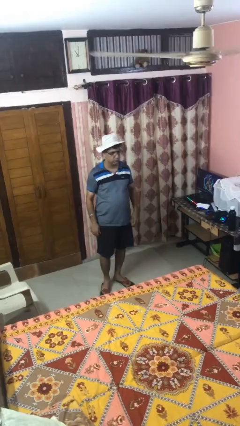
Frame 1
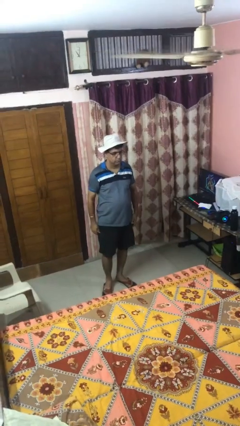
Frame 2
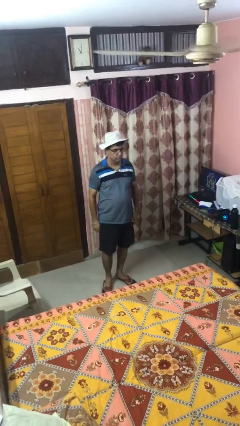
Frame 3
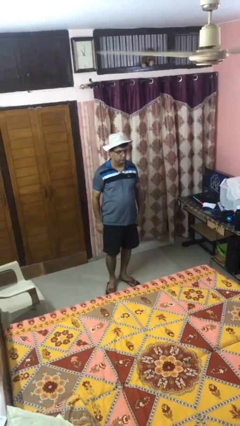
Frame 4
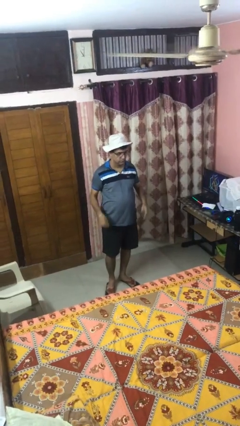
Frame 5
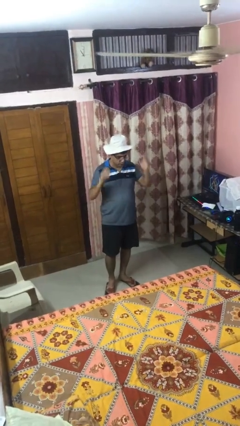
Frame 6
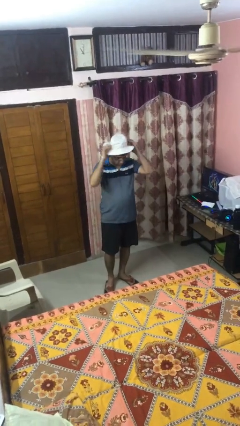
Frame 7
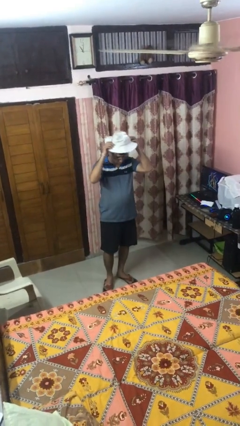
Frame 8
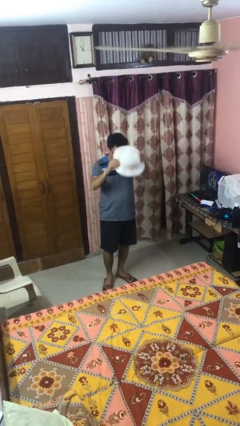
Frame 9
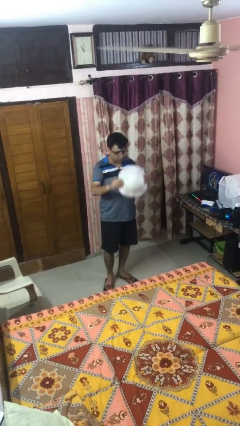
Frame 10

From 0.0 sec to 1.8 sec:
person takes off hat

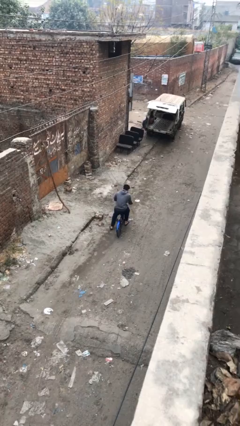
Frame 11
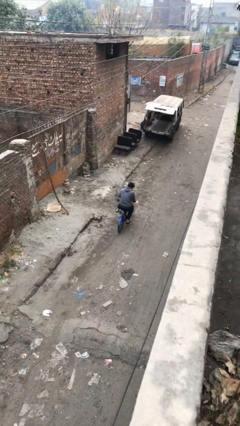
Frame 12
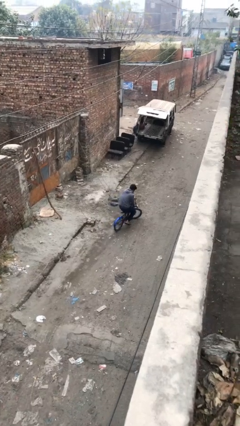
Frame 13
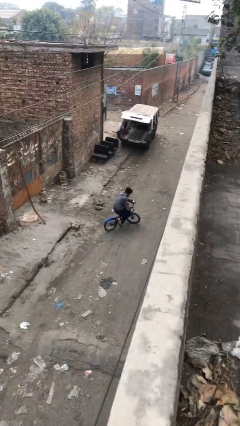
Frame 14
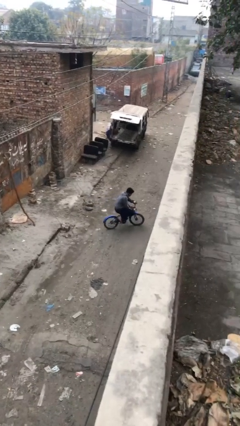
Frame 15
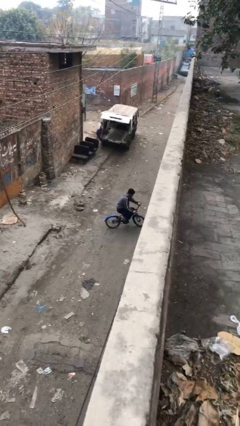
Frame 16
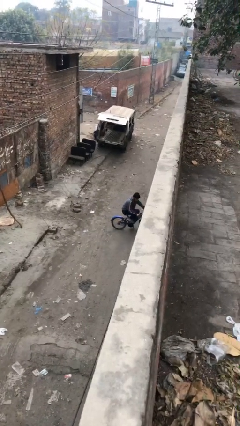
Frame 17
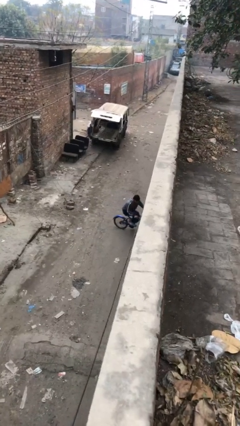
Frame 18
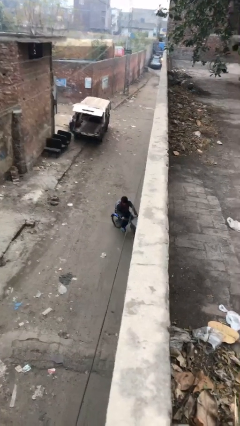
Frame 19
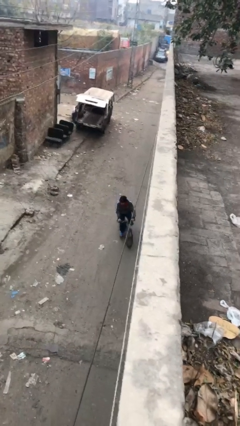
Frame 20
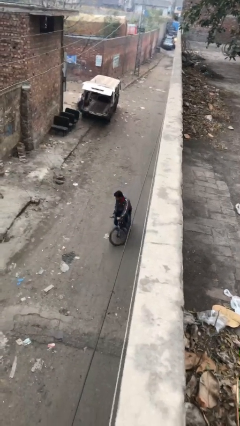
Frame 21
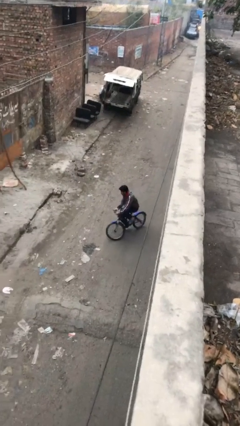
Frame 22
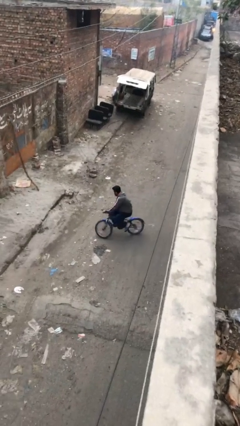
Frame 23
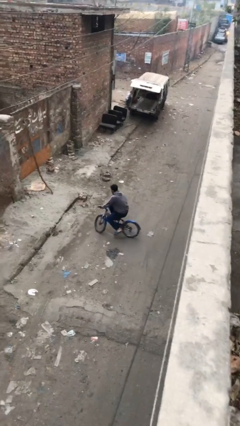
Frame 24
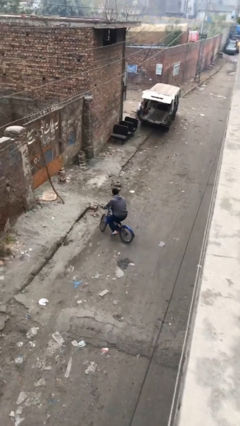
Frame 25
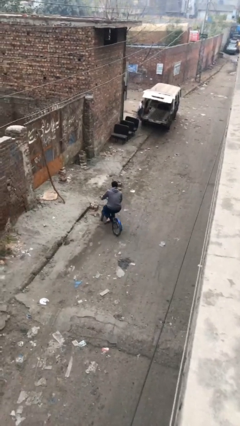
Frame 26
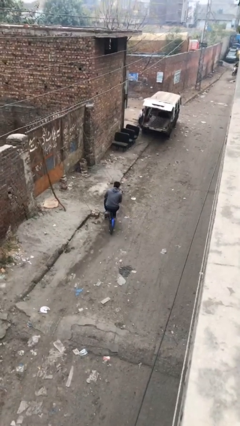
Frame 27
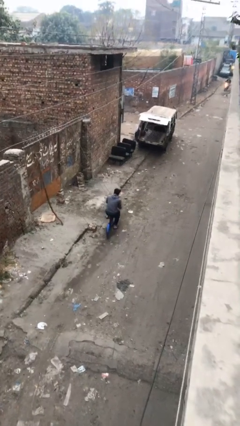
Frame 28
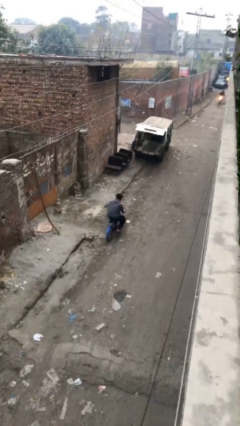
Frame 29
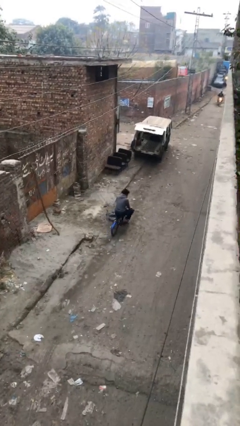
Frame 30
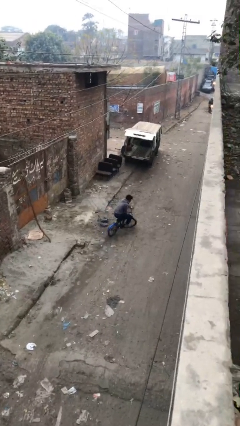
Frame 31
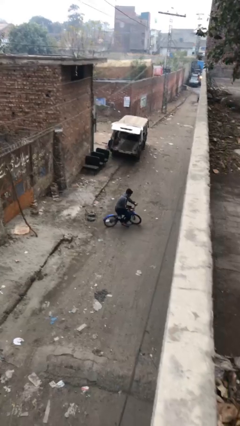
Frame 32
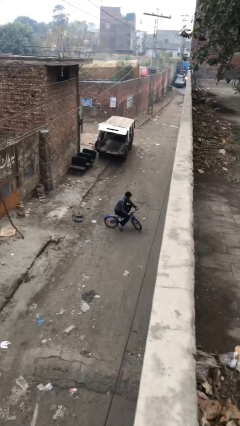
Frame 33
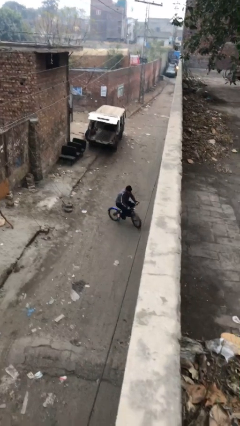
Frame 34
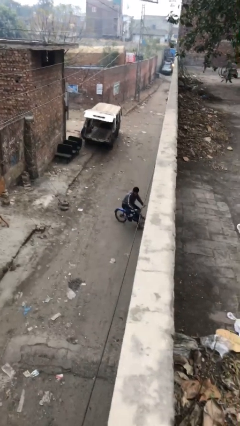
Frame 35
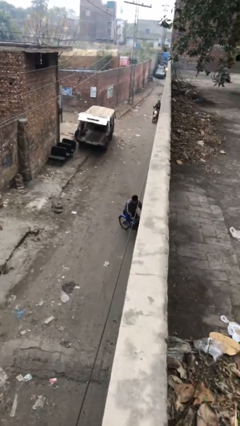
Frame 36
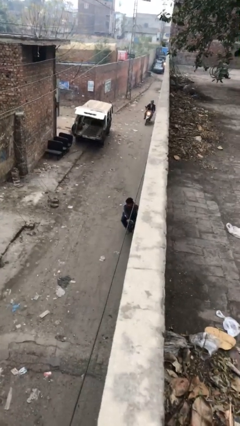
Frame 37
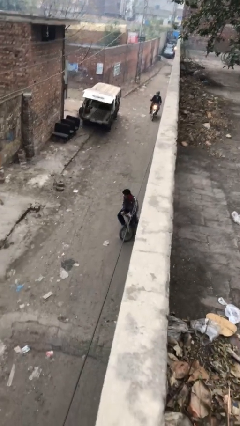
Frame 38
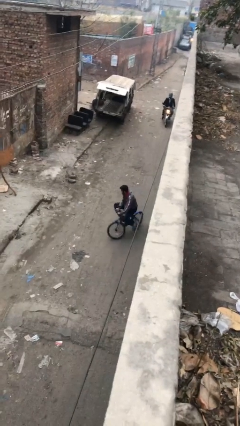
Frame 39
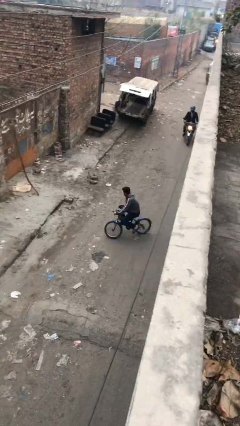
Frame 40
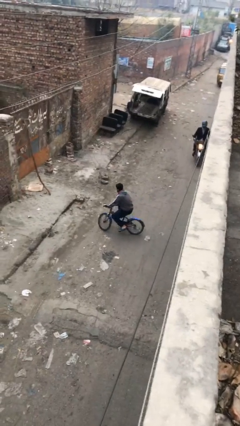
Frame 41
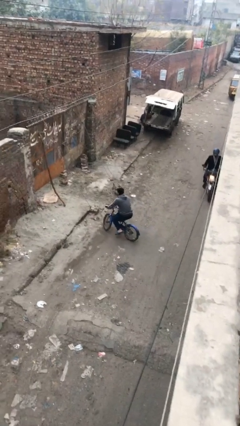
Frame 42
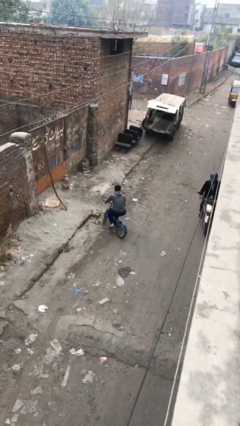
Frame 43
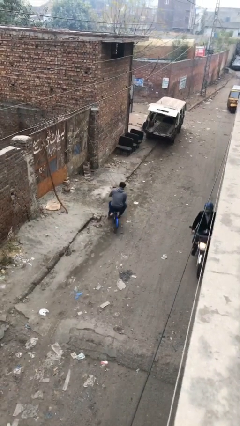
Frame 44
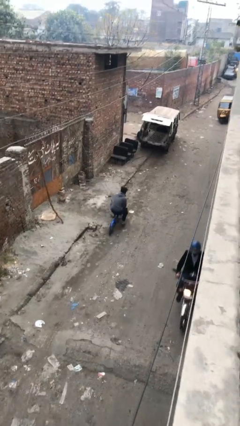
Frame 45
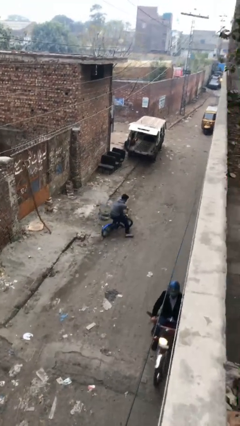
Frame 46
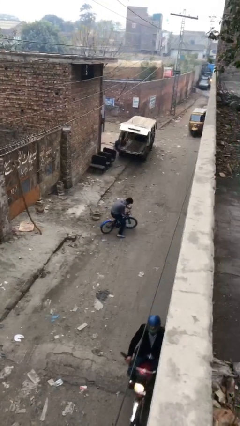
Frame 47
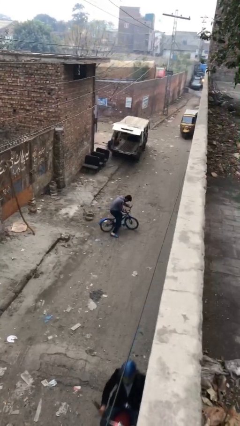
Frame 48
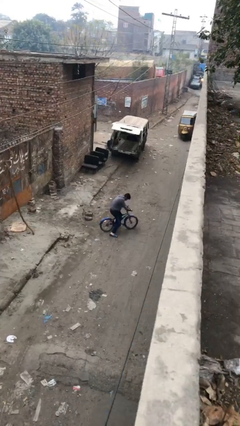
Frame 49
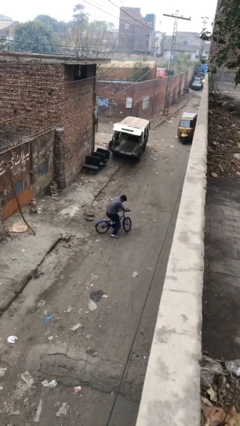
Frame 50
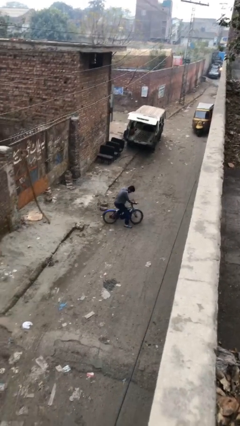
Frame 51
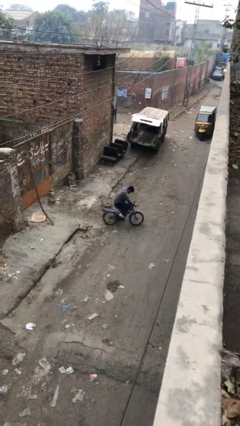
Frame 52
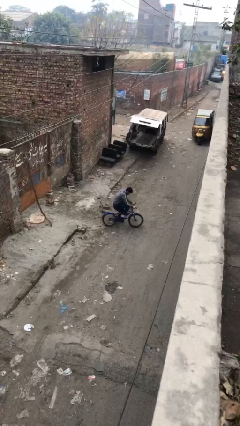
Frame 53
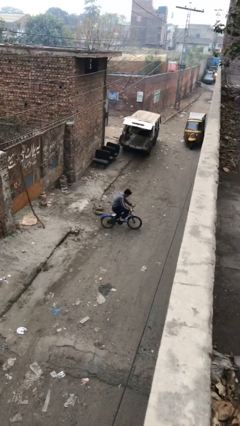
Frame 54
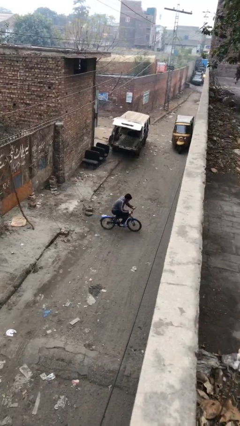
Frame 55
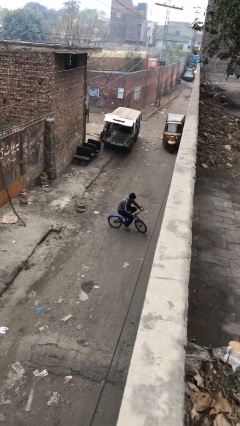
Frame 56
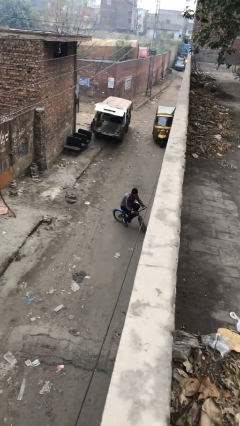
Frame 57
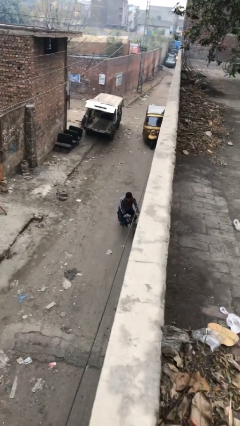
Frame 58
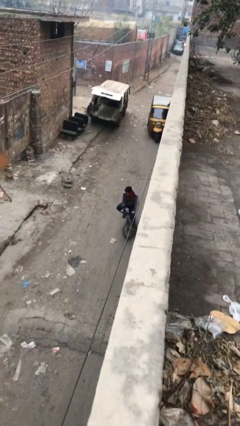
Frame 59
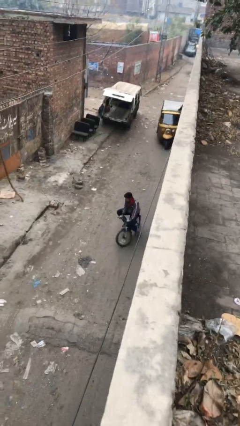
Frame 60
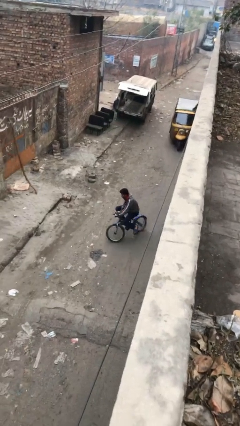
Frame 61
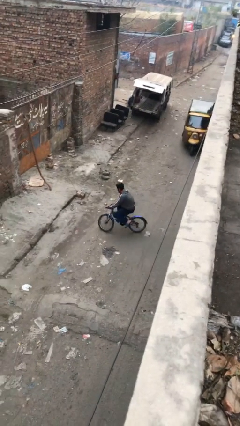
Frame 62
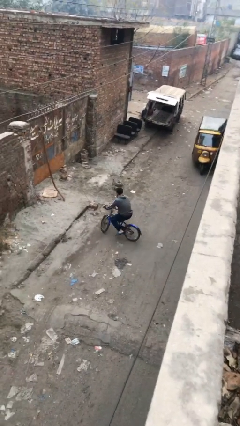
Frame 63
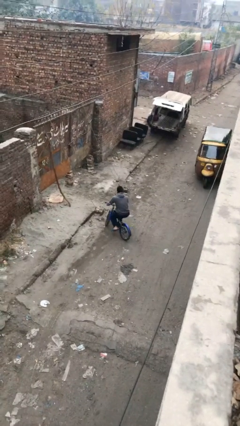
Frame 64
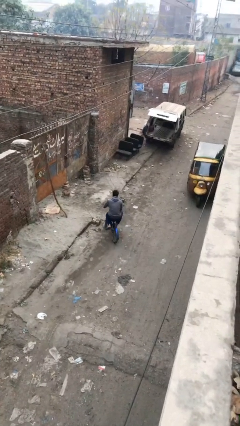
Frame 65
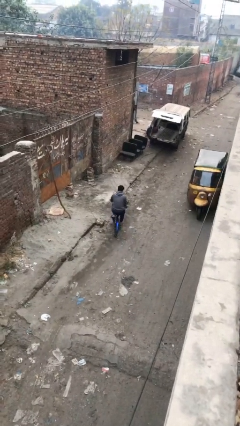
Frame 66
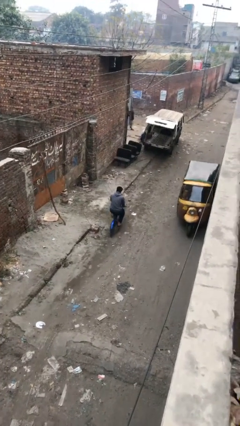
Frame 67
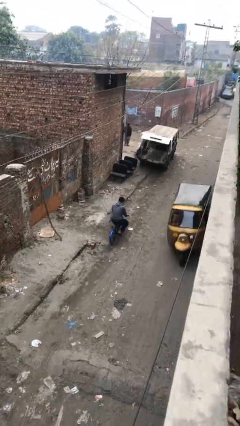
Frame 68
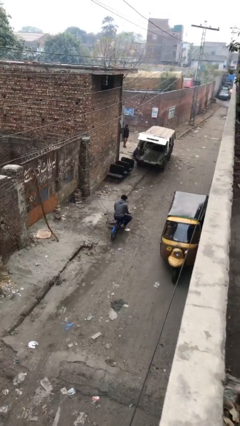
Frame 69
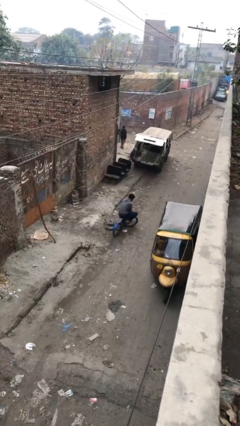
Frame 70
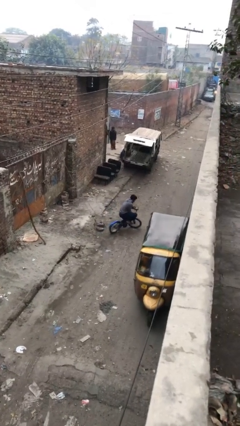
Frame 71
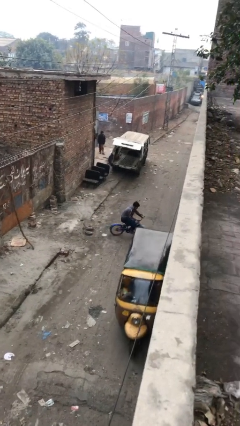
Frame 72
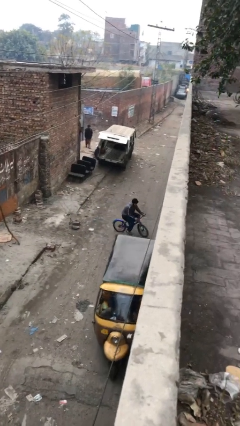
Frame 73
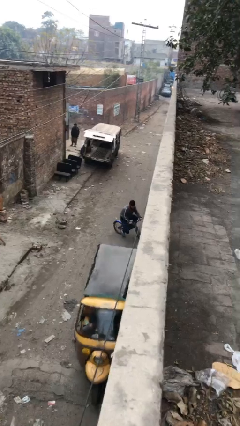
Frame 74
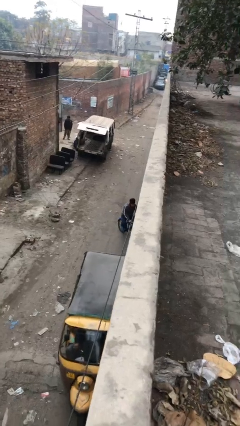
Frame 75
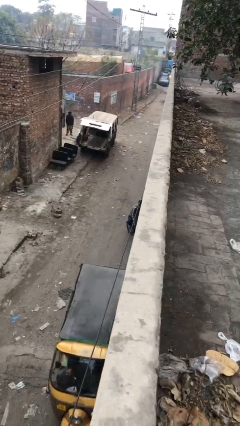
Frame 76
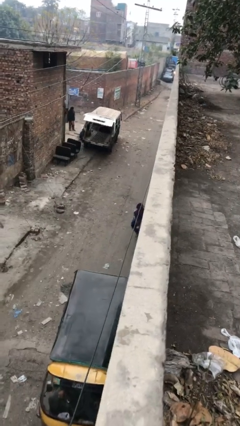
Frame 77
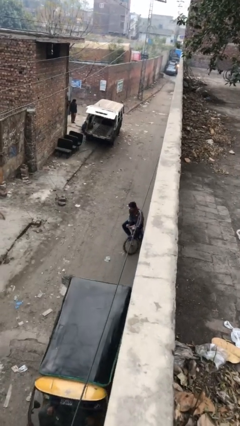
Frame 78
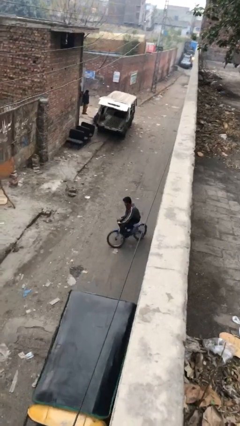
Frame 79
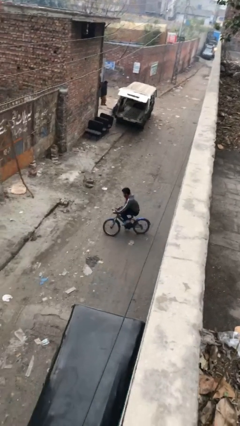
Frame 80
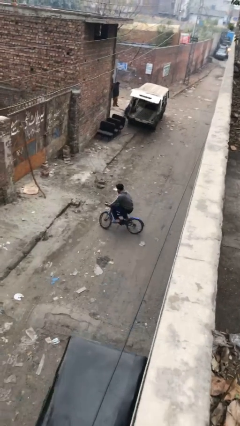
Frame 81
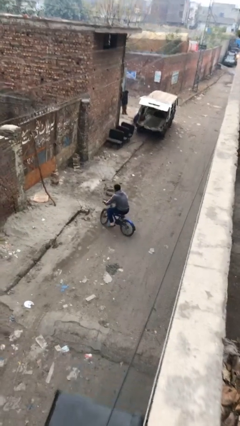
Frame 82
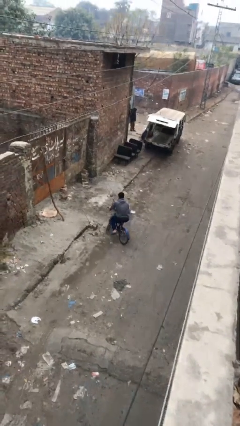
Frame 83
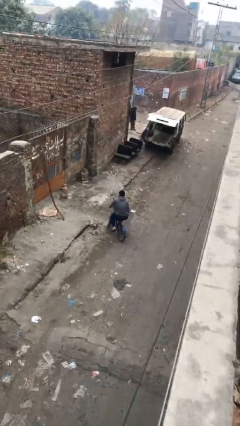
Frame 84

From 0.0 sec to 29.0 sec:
person rides bicycle

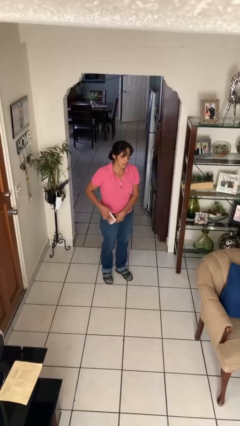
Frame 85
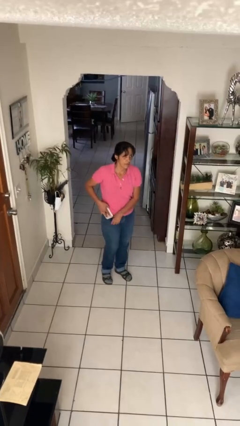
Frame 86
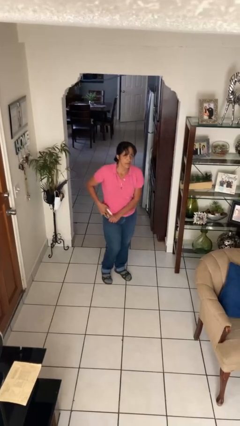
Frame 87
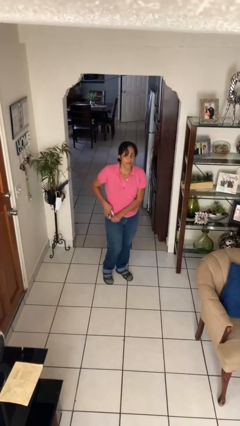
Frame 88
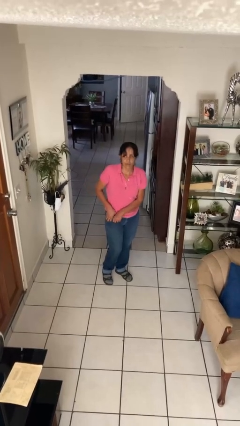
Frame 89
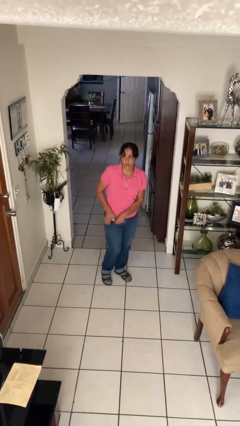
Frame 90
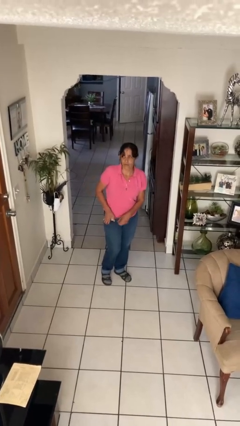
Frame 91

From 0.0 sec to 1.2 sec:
person puts phone into pocket
